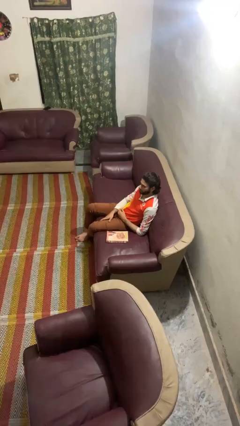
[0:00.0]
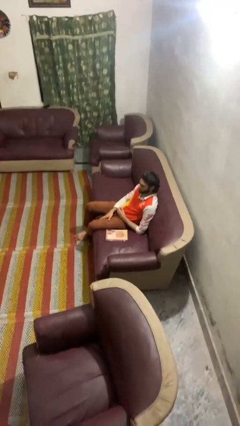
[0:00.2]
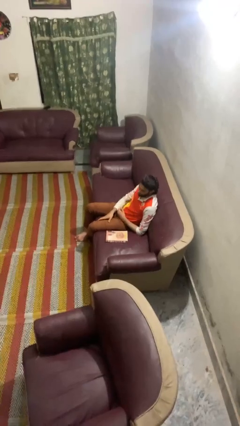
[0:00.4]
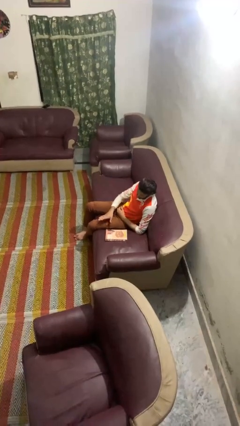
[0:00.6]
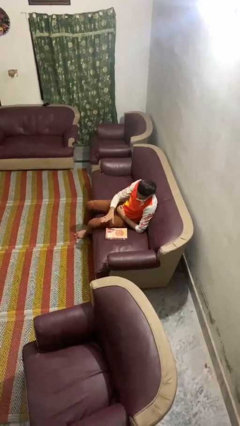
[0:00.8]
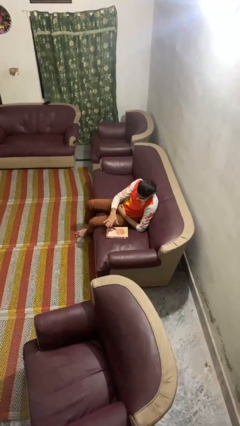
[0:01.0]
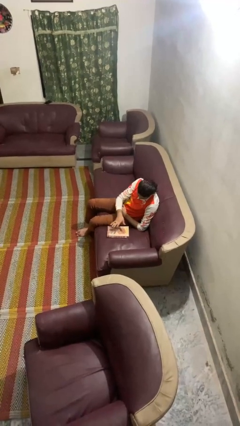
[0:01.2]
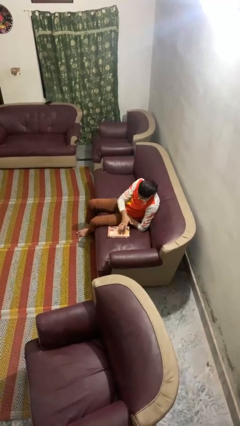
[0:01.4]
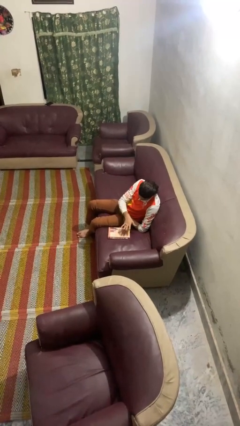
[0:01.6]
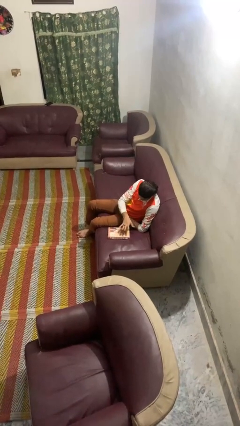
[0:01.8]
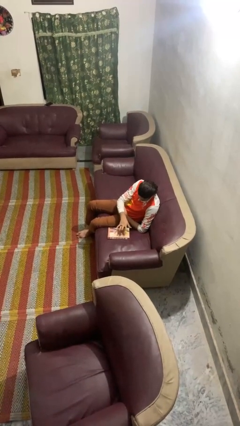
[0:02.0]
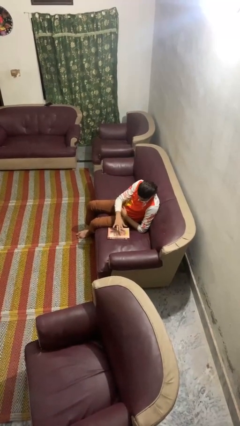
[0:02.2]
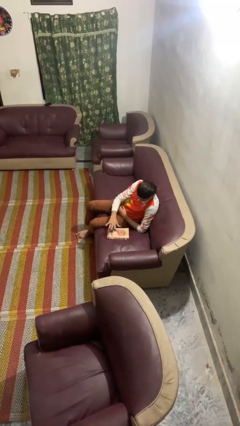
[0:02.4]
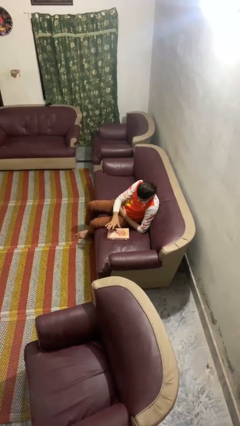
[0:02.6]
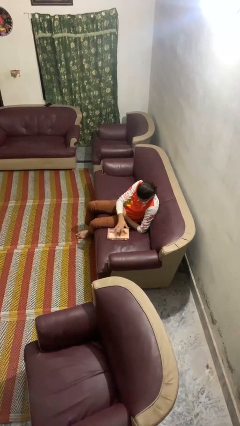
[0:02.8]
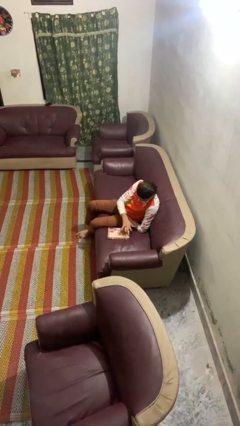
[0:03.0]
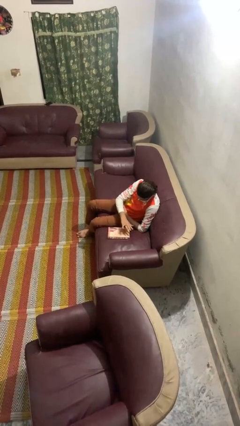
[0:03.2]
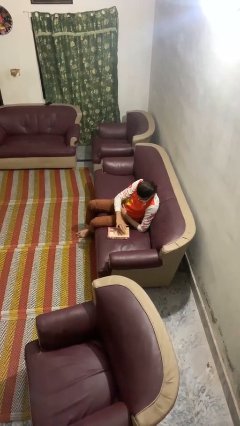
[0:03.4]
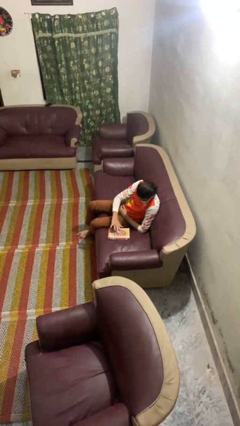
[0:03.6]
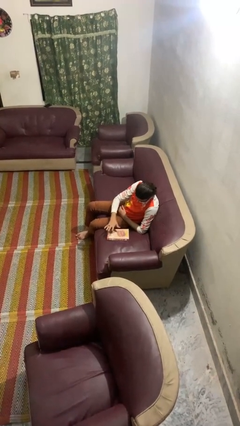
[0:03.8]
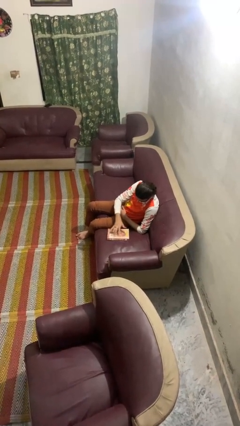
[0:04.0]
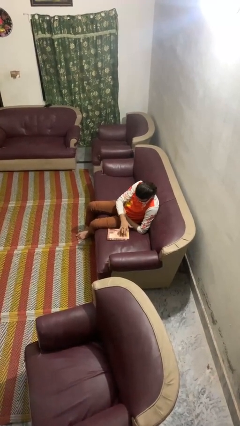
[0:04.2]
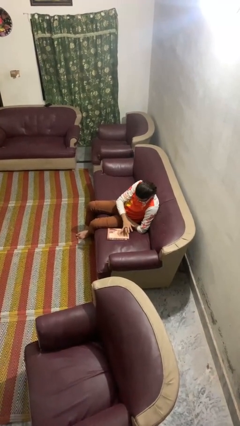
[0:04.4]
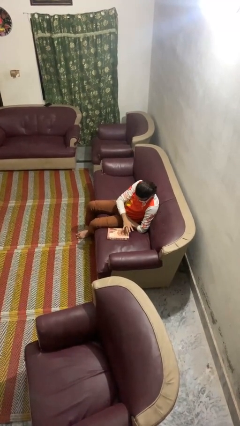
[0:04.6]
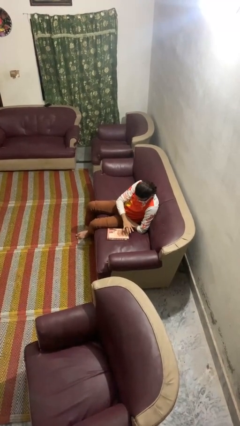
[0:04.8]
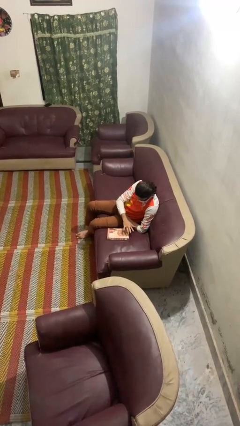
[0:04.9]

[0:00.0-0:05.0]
person waves hand over object

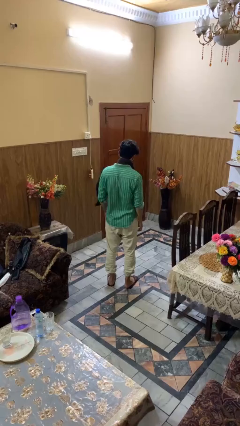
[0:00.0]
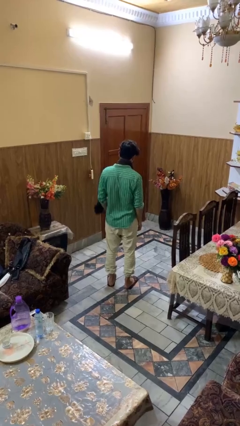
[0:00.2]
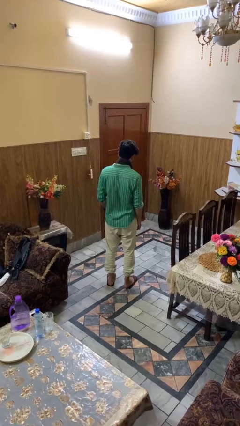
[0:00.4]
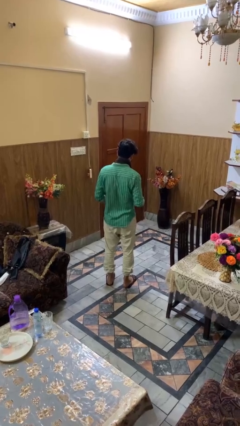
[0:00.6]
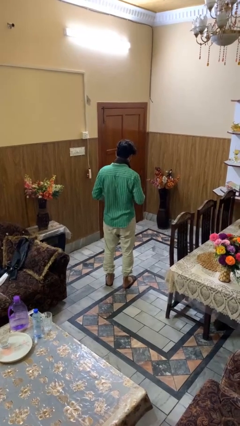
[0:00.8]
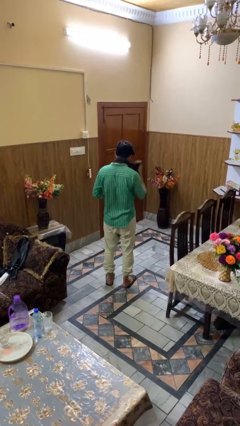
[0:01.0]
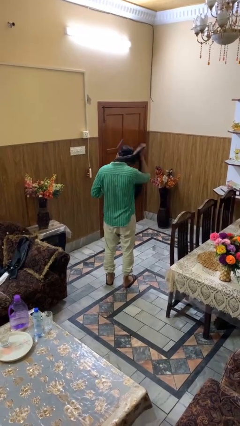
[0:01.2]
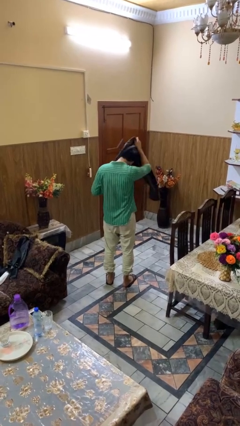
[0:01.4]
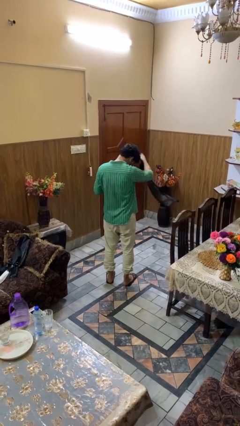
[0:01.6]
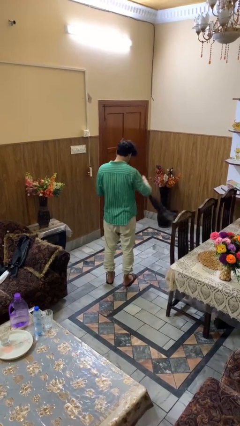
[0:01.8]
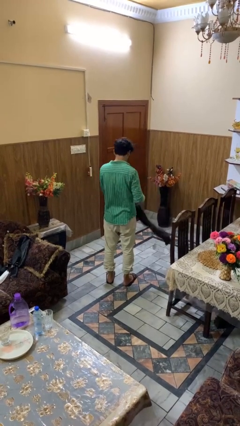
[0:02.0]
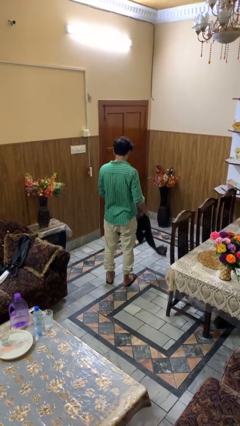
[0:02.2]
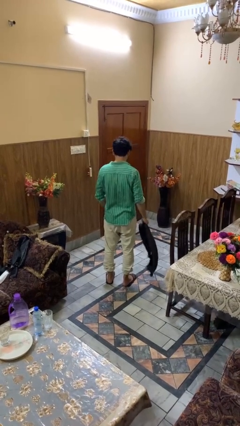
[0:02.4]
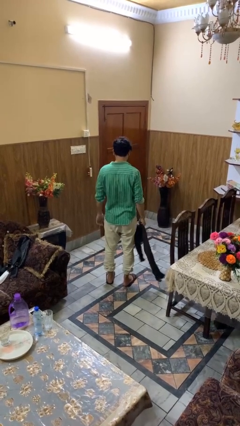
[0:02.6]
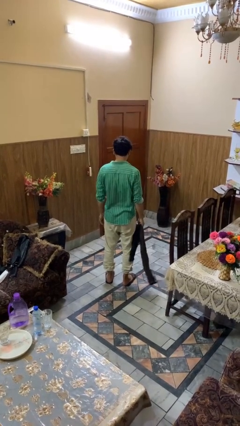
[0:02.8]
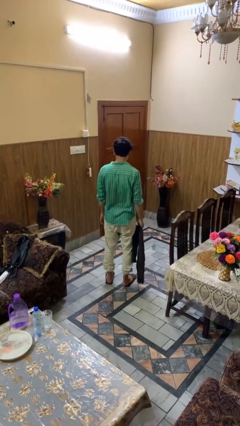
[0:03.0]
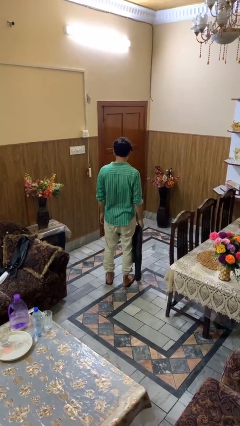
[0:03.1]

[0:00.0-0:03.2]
person takes off scarf

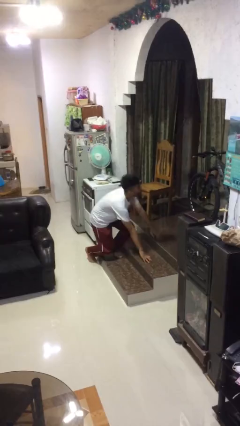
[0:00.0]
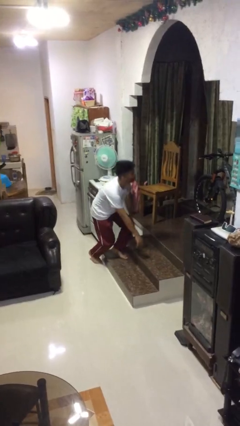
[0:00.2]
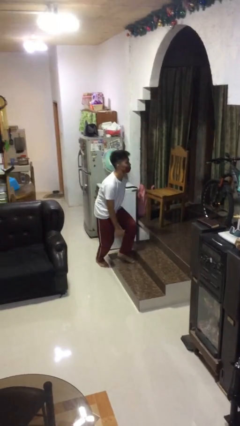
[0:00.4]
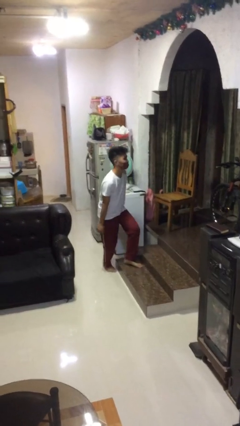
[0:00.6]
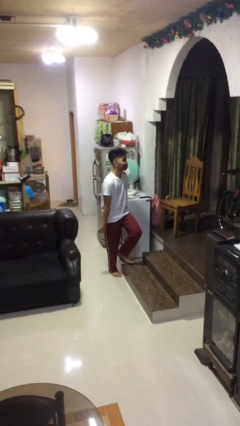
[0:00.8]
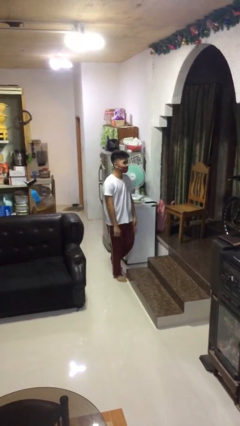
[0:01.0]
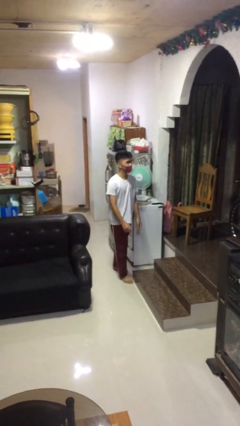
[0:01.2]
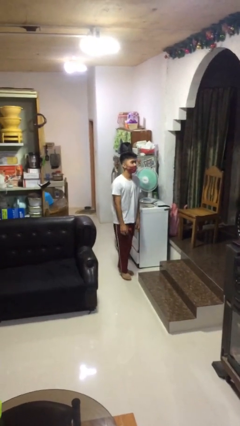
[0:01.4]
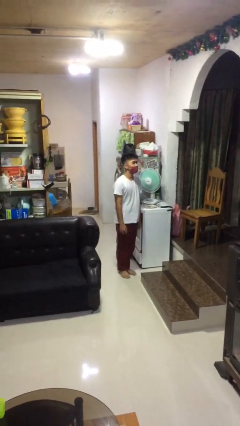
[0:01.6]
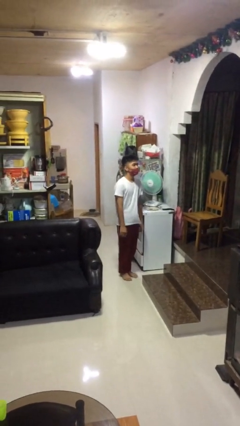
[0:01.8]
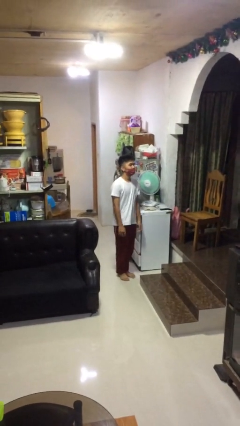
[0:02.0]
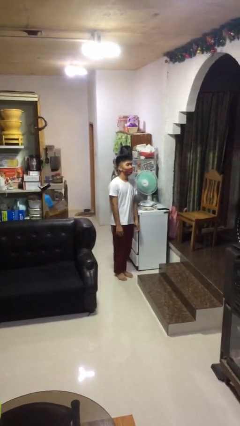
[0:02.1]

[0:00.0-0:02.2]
person stands up from floor

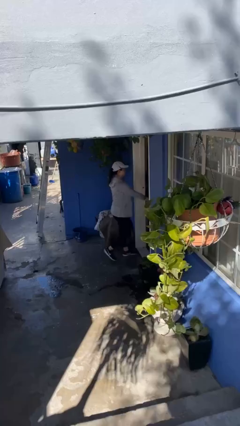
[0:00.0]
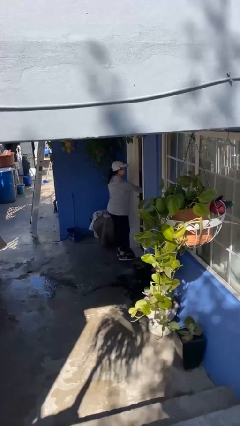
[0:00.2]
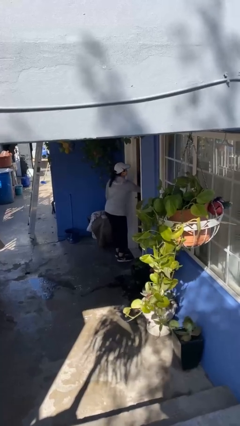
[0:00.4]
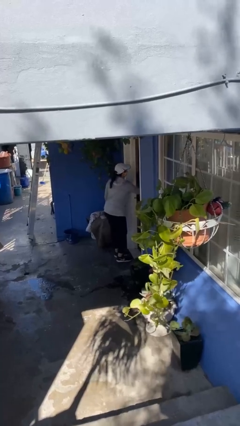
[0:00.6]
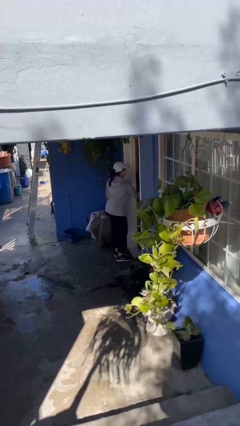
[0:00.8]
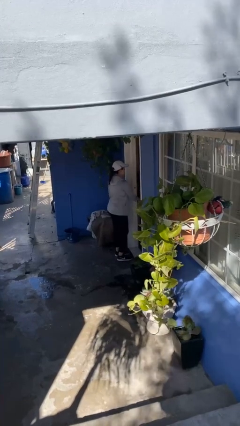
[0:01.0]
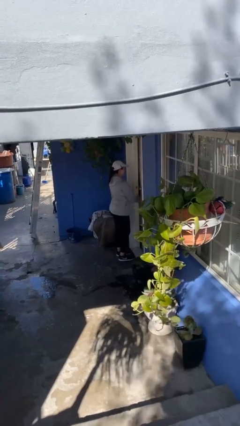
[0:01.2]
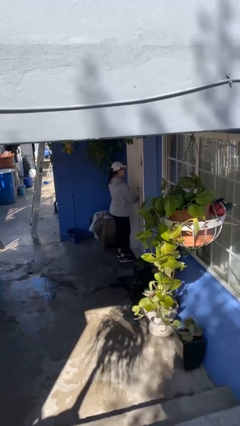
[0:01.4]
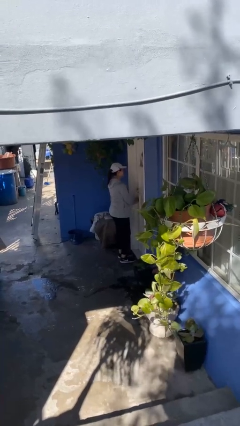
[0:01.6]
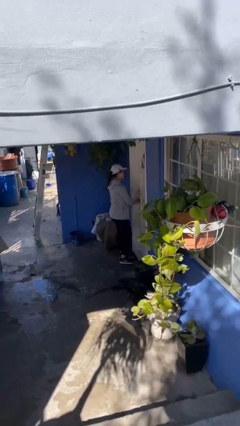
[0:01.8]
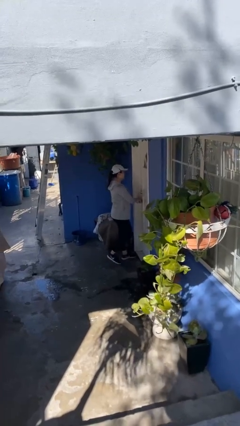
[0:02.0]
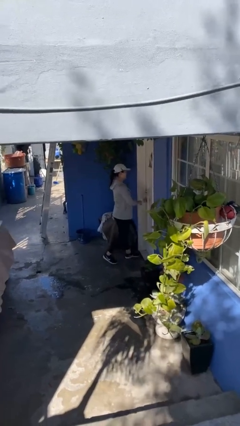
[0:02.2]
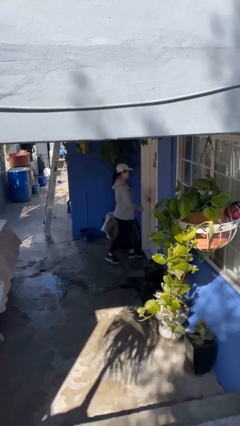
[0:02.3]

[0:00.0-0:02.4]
person closes facility door

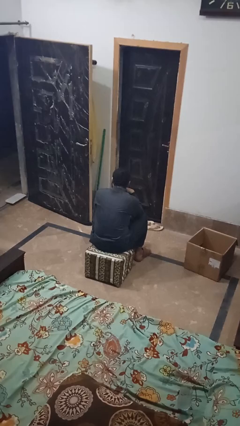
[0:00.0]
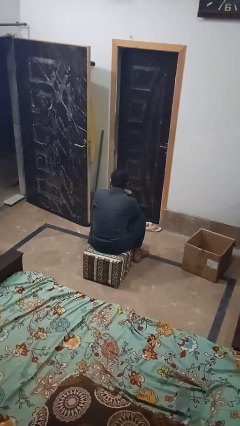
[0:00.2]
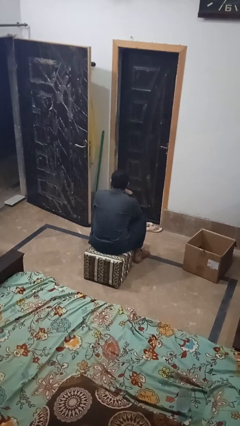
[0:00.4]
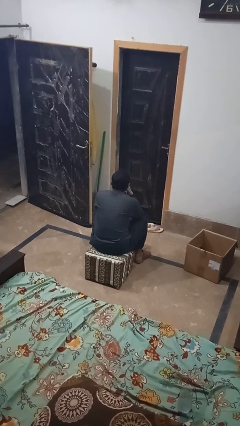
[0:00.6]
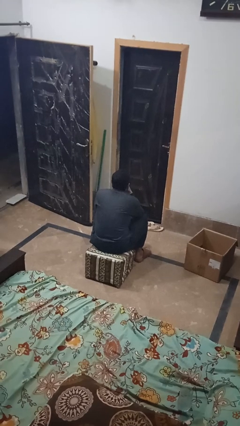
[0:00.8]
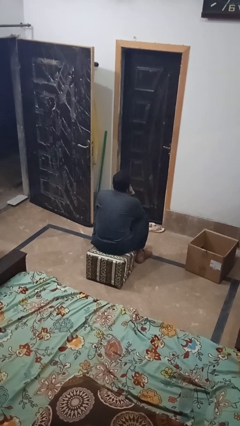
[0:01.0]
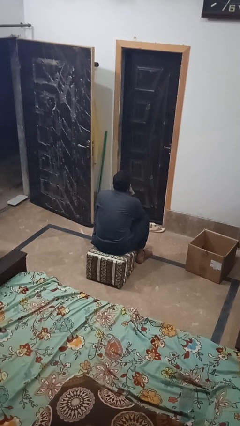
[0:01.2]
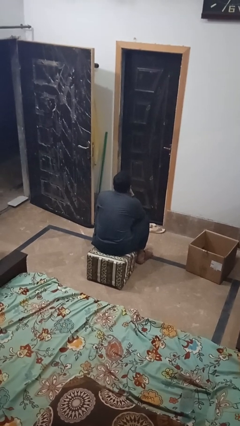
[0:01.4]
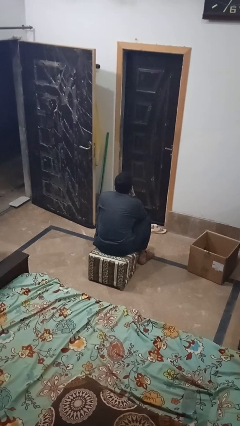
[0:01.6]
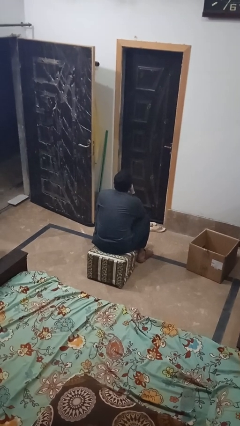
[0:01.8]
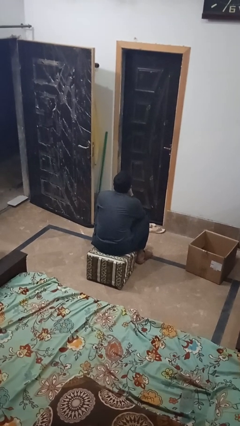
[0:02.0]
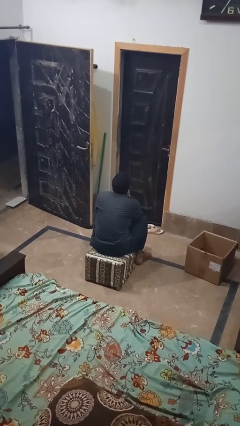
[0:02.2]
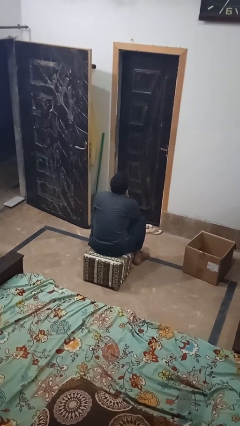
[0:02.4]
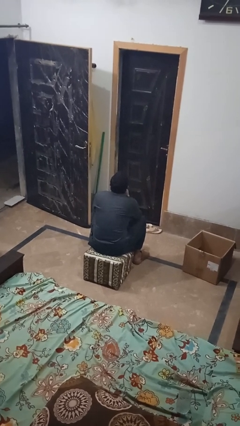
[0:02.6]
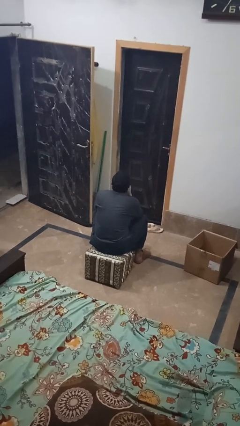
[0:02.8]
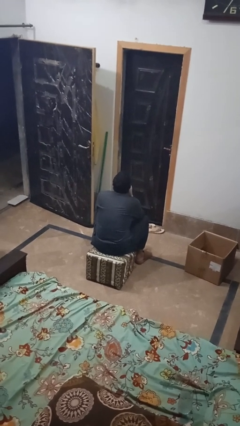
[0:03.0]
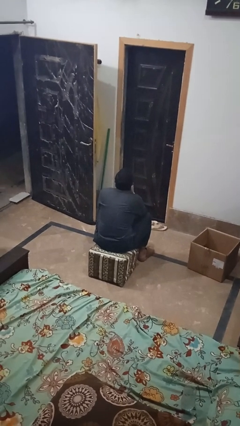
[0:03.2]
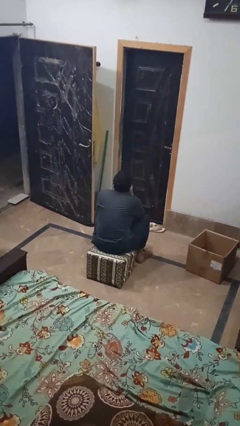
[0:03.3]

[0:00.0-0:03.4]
person strokes chin

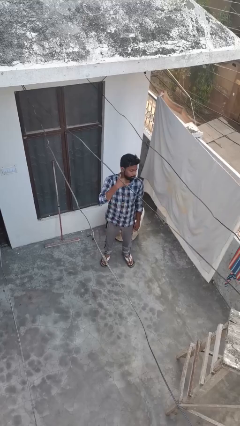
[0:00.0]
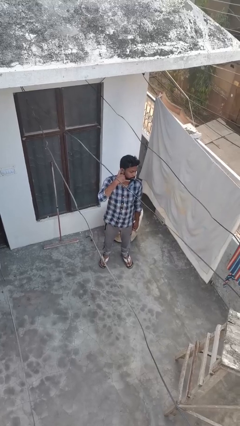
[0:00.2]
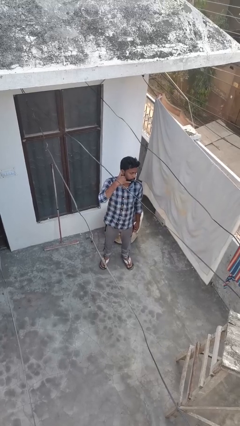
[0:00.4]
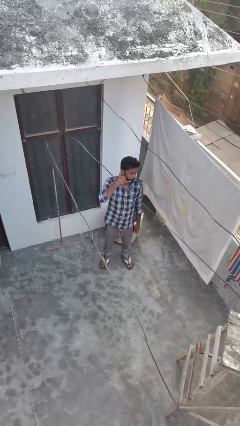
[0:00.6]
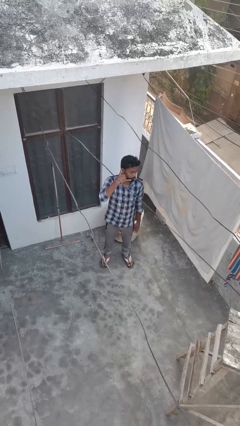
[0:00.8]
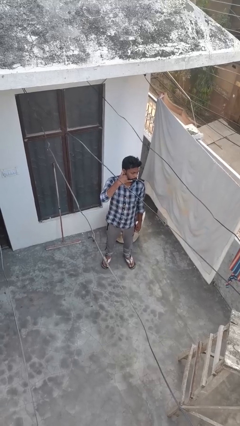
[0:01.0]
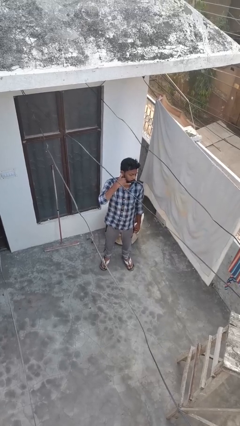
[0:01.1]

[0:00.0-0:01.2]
person gestures call me

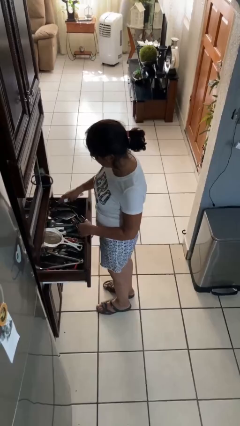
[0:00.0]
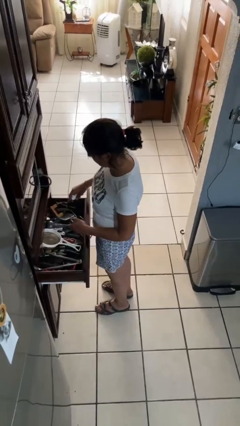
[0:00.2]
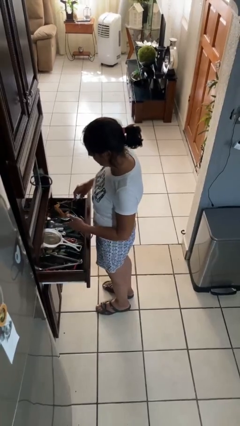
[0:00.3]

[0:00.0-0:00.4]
person takes object from kitchen drawer
